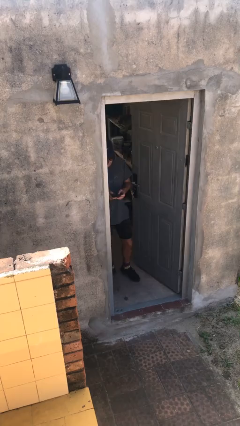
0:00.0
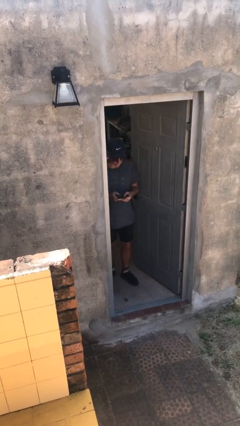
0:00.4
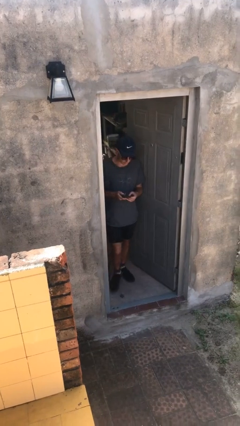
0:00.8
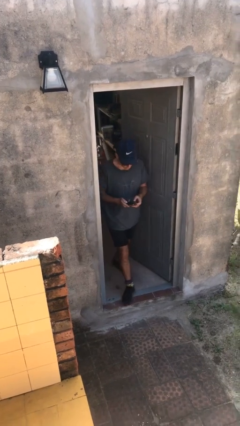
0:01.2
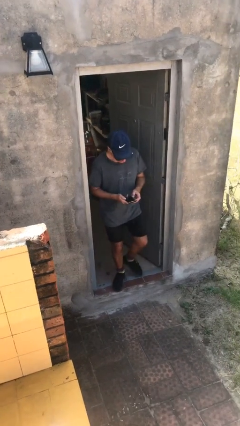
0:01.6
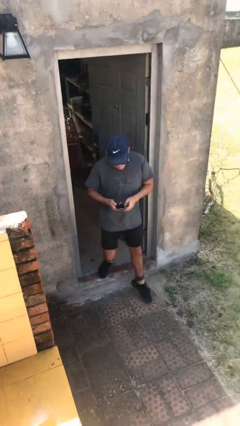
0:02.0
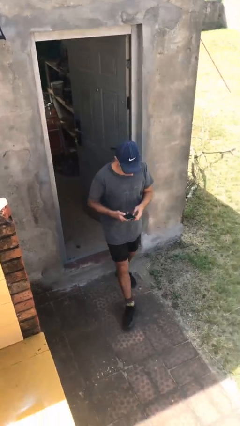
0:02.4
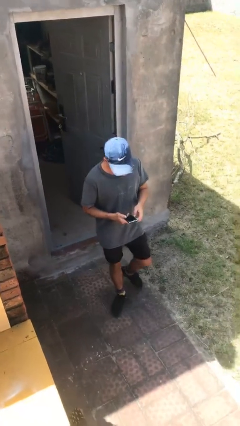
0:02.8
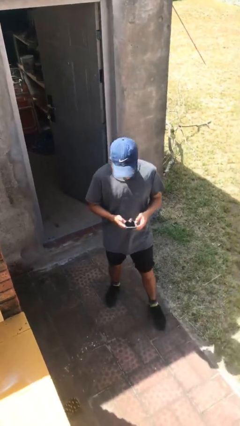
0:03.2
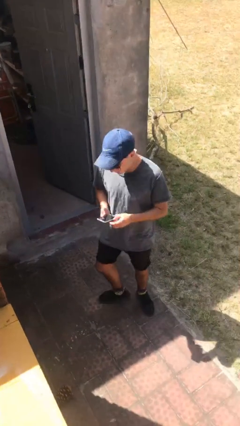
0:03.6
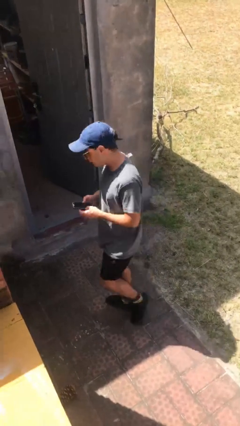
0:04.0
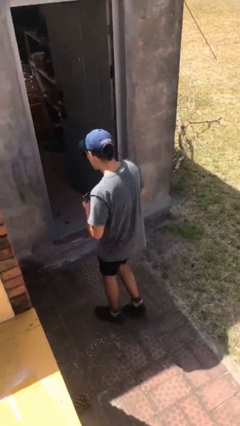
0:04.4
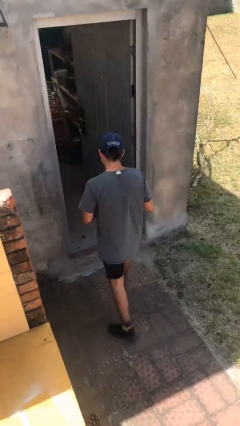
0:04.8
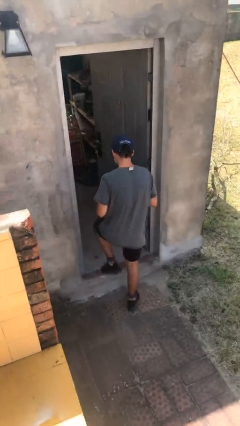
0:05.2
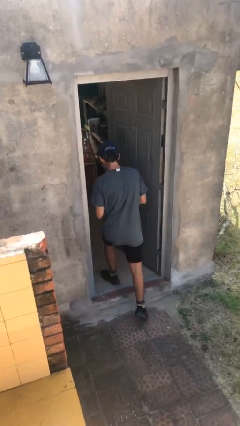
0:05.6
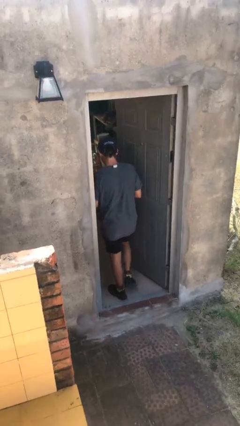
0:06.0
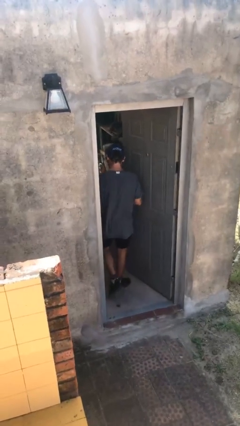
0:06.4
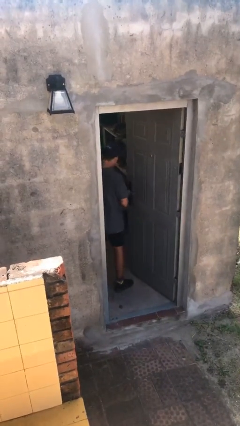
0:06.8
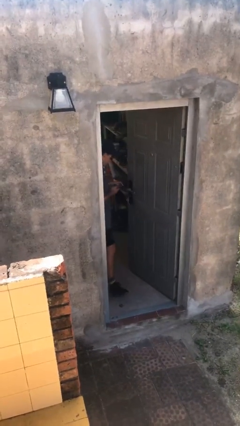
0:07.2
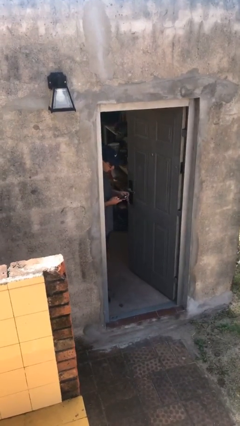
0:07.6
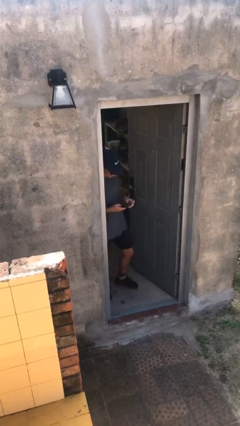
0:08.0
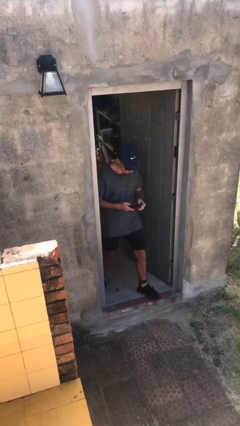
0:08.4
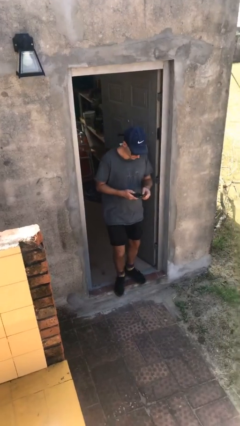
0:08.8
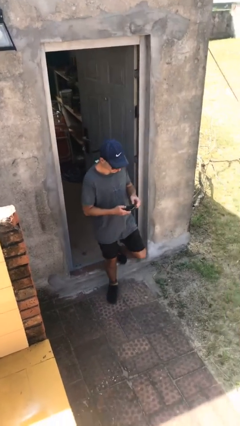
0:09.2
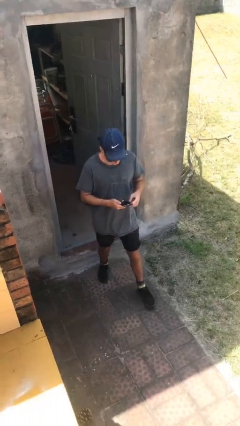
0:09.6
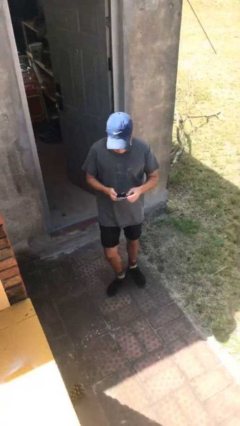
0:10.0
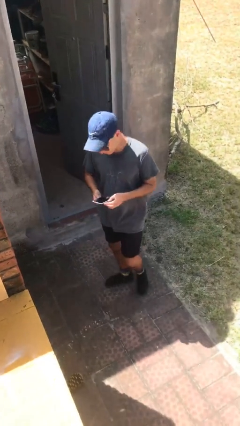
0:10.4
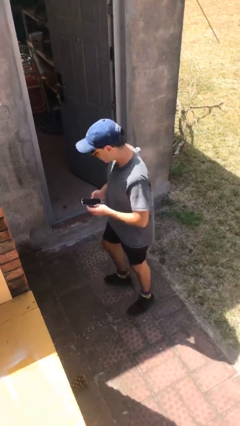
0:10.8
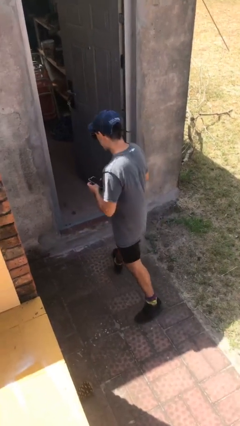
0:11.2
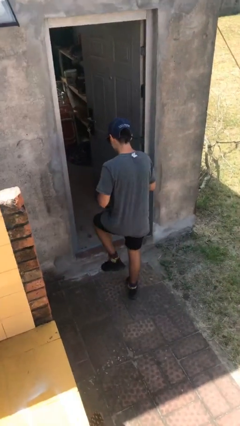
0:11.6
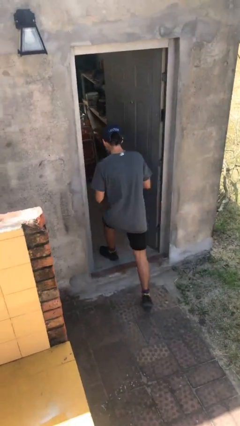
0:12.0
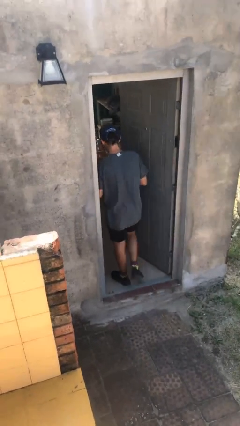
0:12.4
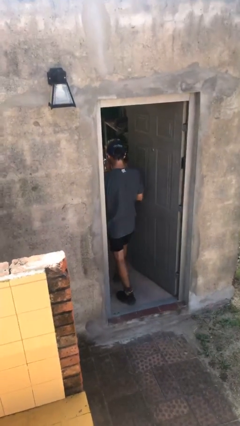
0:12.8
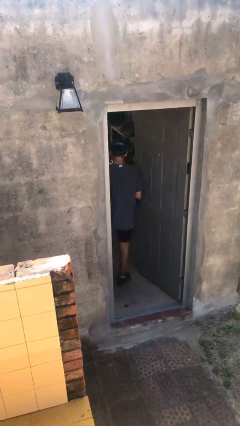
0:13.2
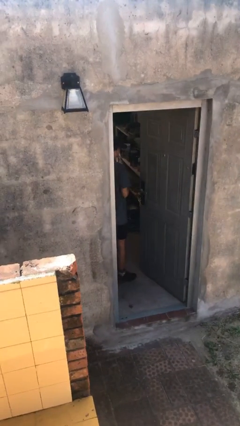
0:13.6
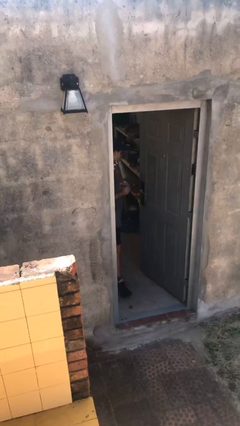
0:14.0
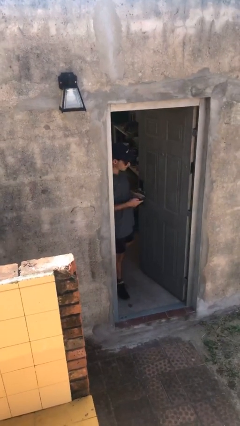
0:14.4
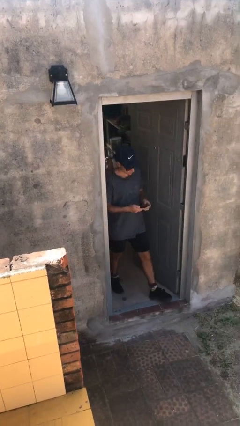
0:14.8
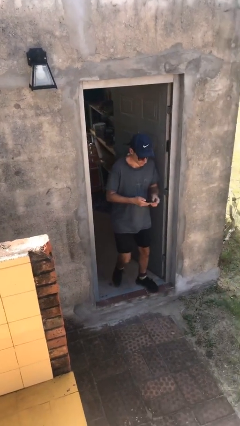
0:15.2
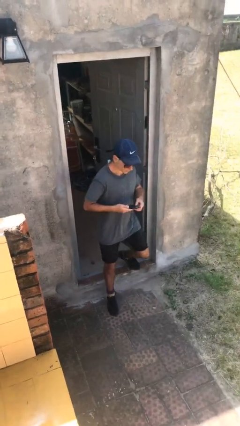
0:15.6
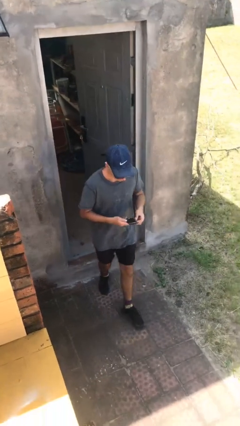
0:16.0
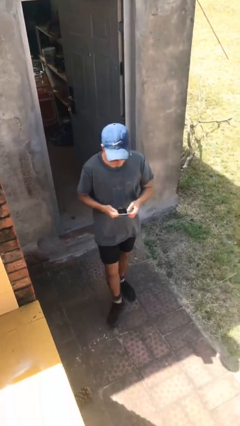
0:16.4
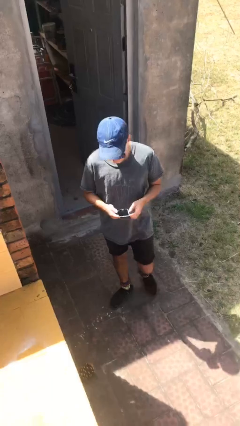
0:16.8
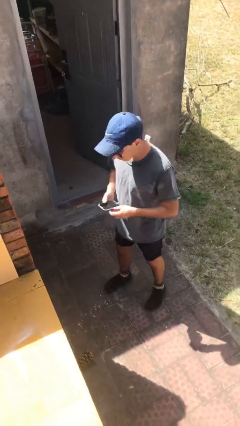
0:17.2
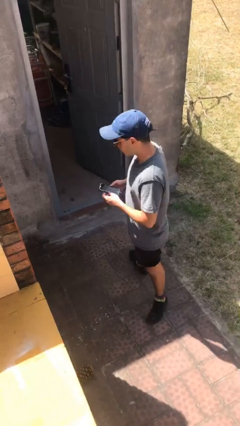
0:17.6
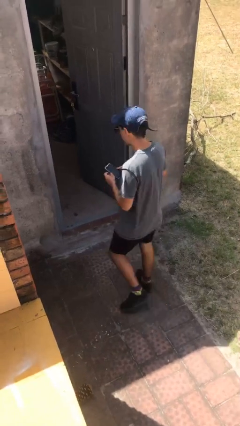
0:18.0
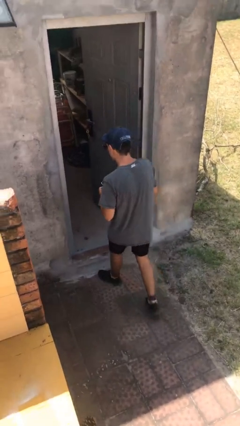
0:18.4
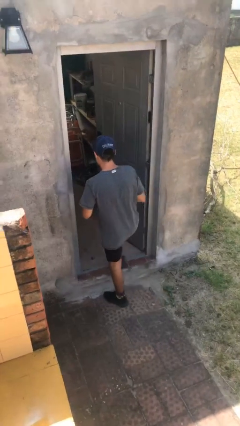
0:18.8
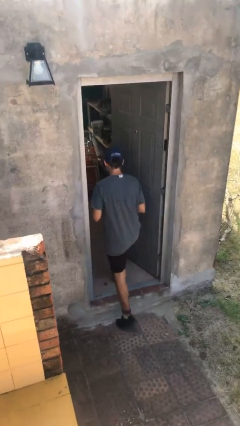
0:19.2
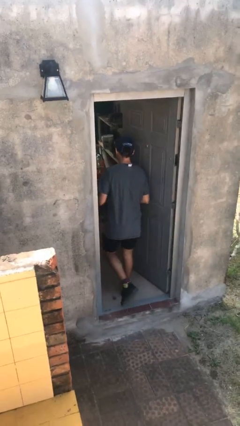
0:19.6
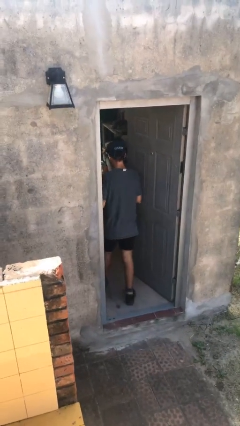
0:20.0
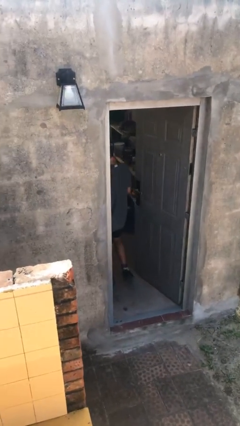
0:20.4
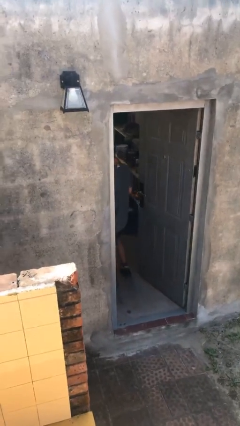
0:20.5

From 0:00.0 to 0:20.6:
person texts on phone

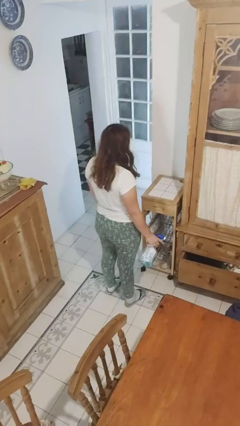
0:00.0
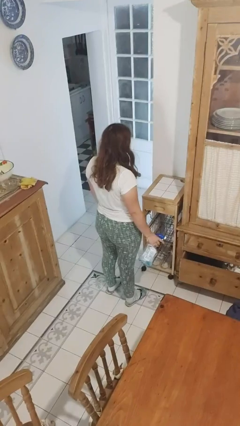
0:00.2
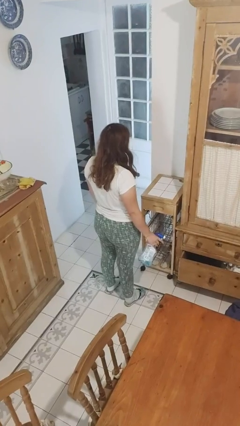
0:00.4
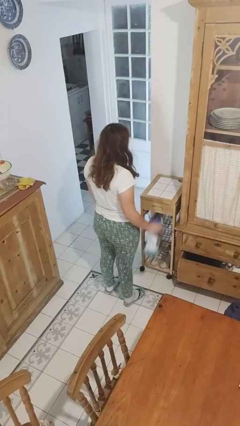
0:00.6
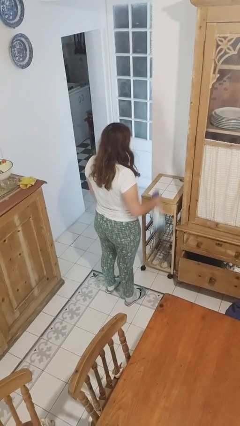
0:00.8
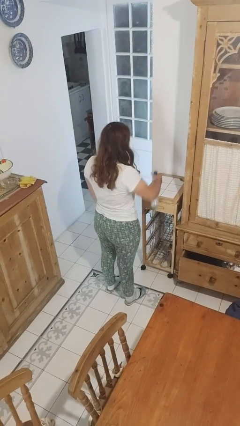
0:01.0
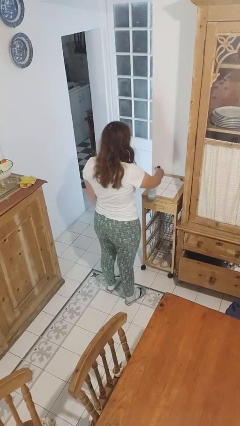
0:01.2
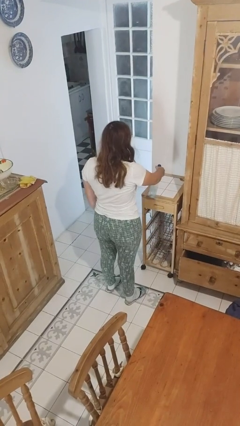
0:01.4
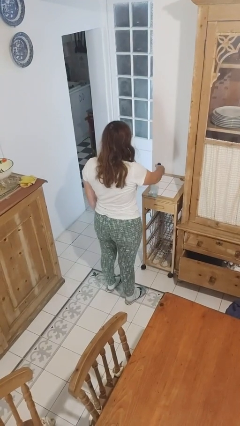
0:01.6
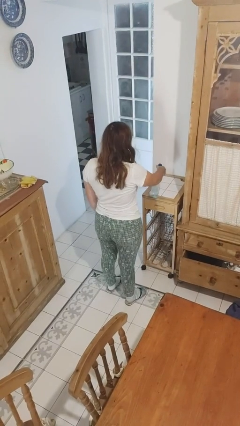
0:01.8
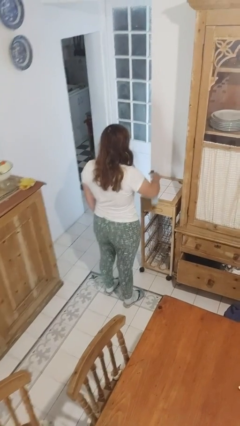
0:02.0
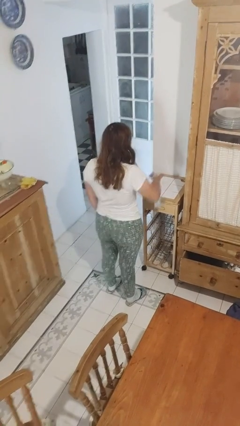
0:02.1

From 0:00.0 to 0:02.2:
person sprays from bottle

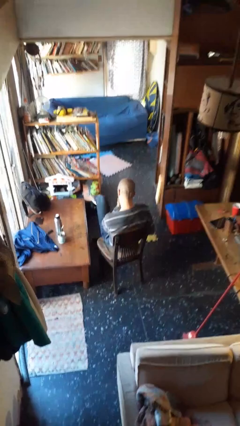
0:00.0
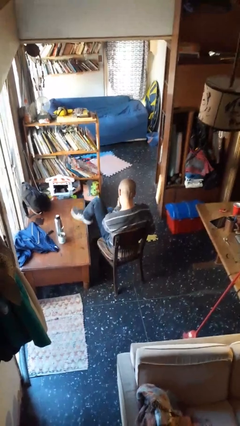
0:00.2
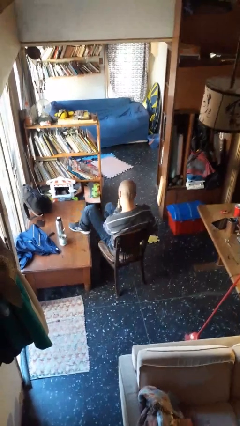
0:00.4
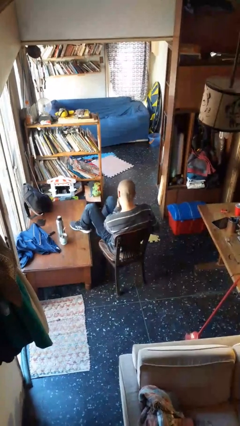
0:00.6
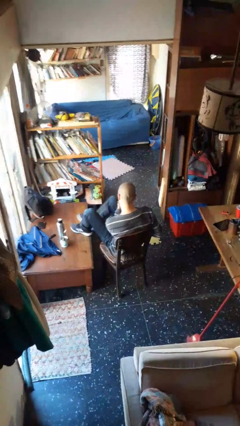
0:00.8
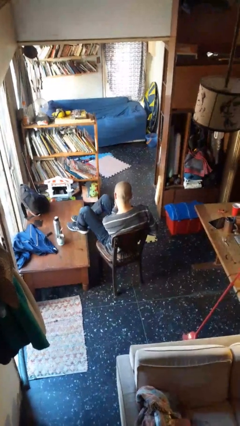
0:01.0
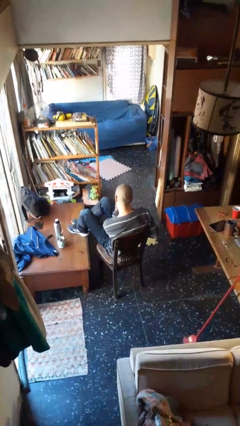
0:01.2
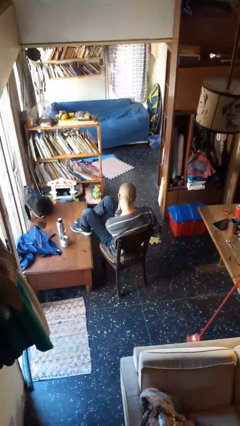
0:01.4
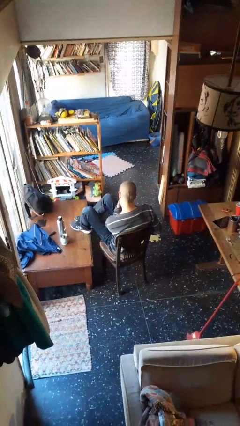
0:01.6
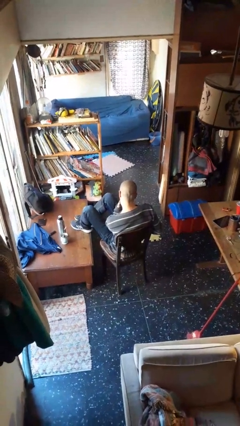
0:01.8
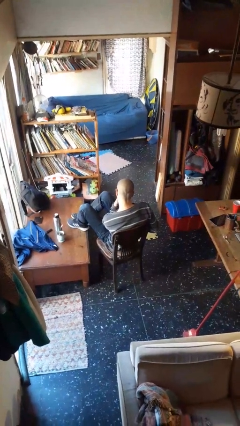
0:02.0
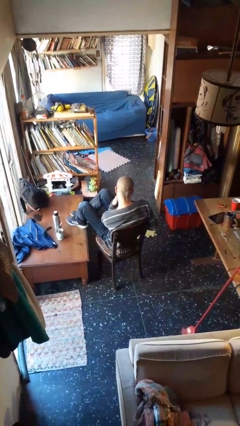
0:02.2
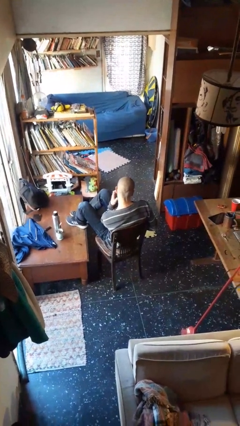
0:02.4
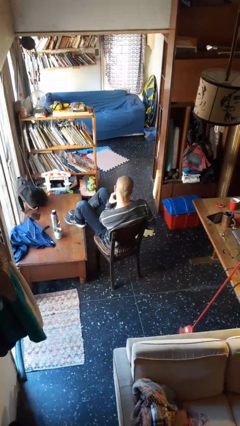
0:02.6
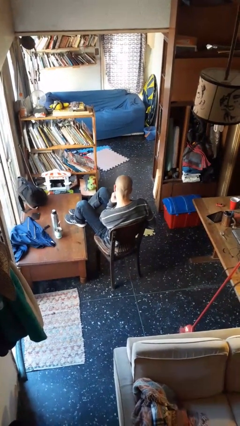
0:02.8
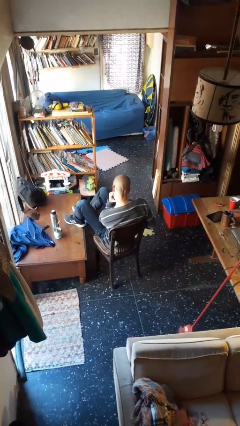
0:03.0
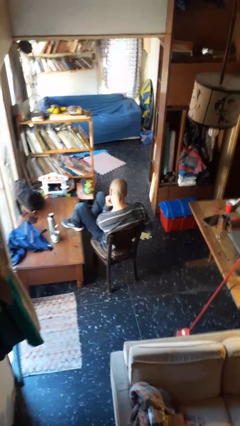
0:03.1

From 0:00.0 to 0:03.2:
person puts feet up

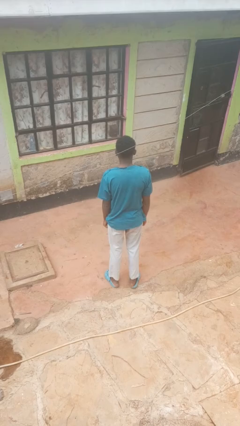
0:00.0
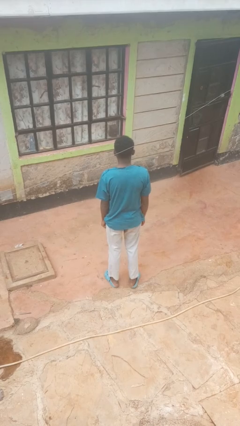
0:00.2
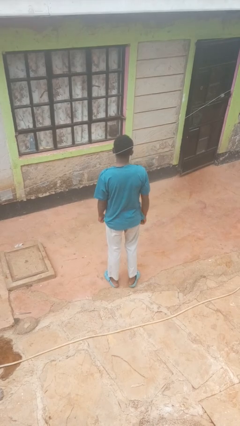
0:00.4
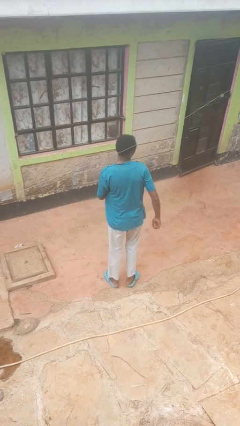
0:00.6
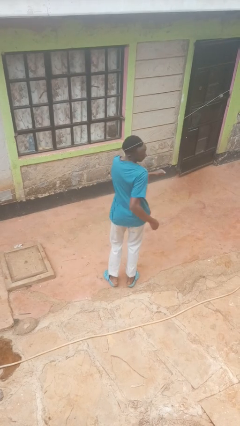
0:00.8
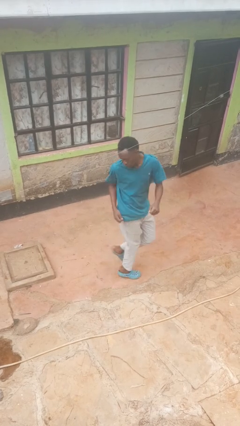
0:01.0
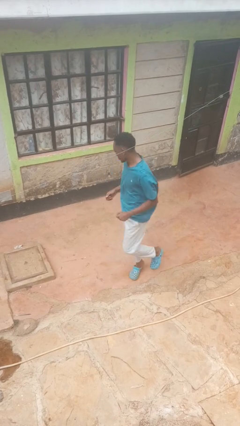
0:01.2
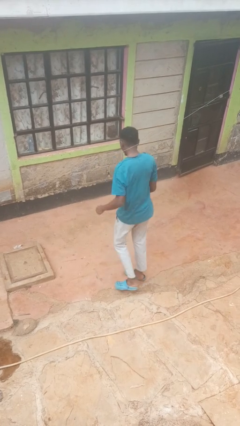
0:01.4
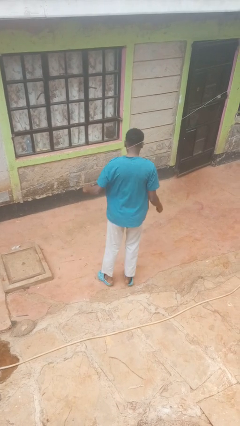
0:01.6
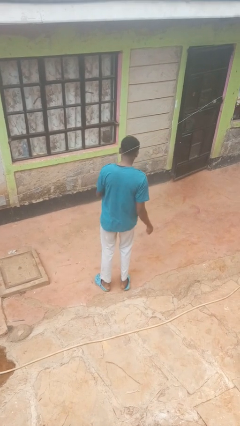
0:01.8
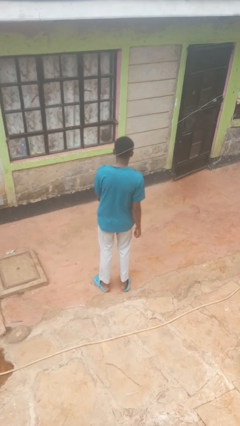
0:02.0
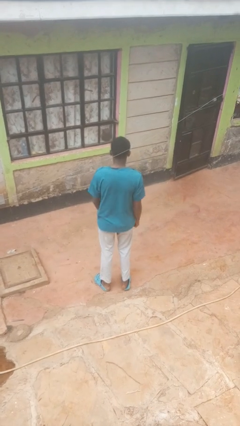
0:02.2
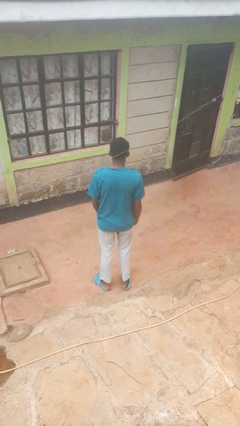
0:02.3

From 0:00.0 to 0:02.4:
person twirls
